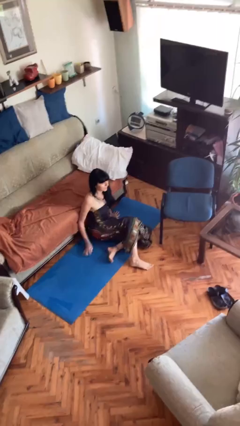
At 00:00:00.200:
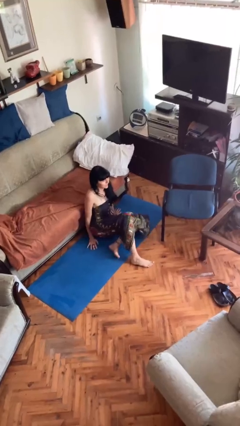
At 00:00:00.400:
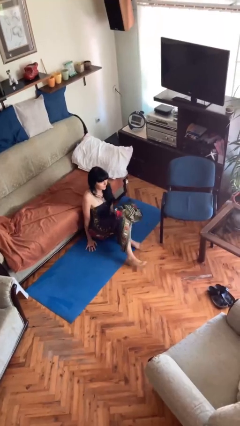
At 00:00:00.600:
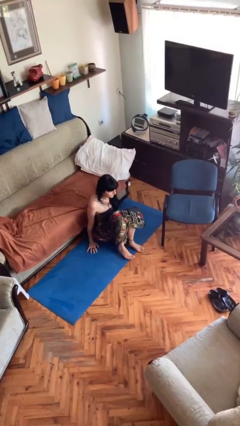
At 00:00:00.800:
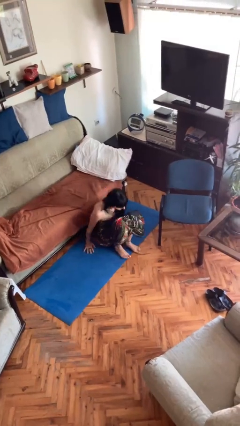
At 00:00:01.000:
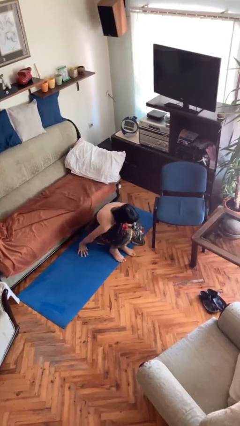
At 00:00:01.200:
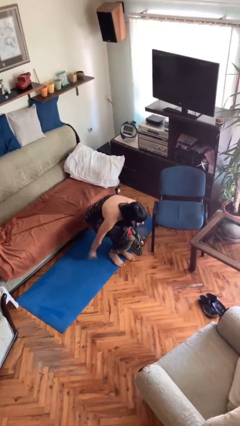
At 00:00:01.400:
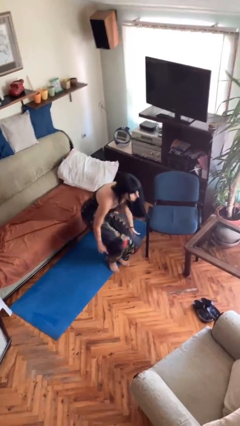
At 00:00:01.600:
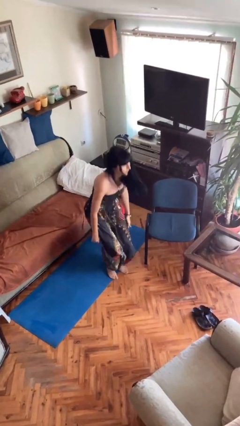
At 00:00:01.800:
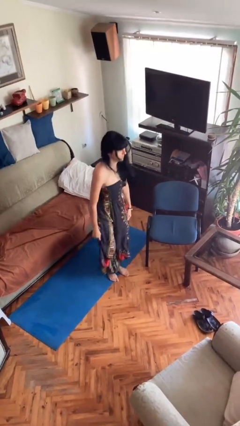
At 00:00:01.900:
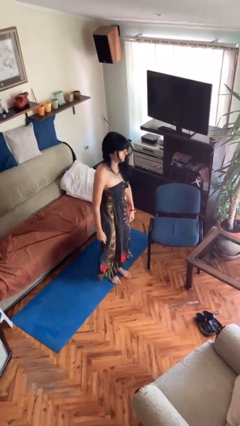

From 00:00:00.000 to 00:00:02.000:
person stands up from floor

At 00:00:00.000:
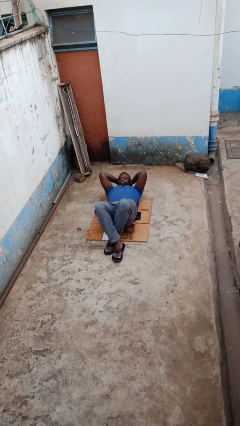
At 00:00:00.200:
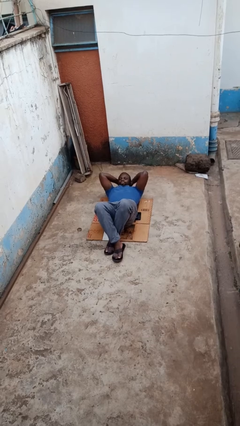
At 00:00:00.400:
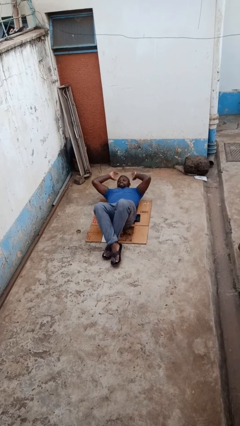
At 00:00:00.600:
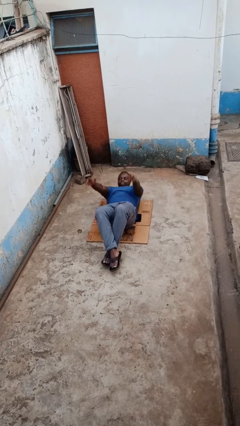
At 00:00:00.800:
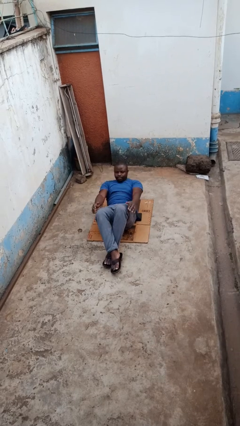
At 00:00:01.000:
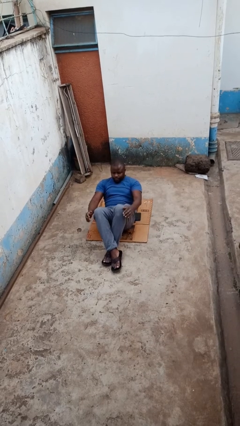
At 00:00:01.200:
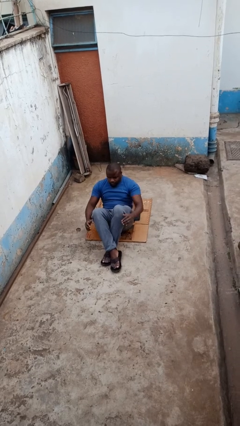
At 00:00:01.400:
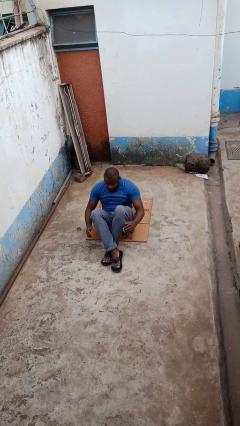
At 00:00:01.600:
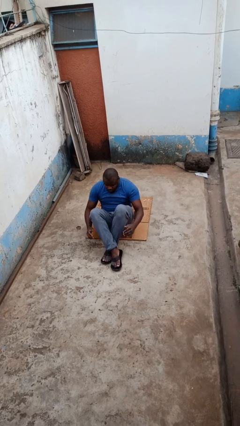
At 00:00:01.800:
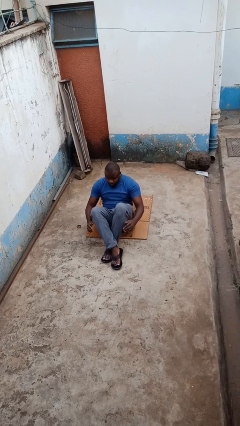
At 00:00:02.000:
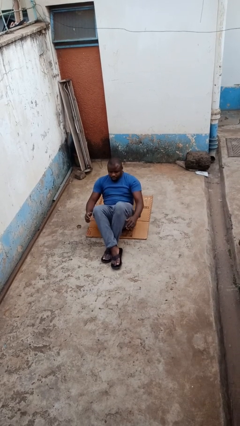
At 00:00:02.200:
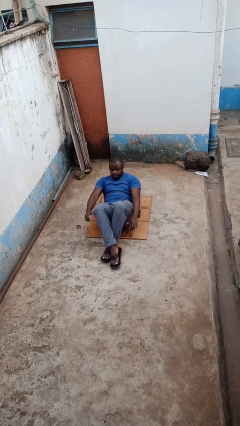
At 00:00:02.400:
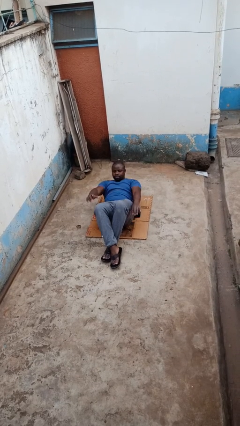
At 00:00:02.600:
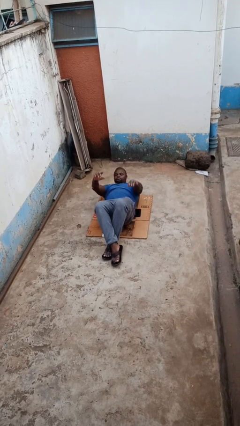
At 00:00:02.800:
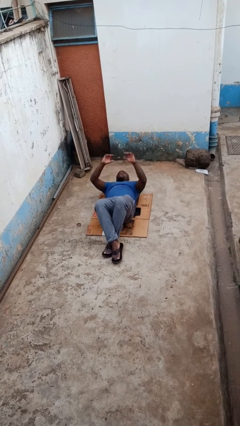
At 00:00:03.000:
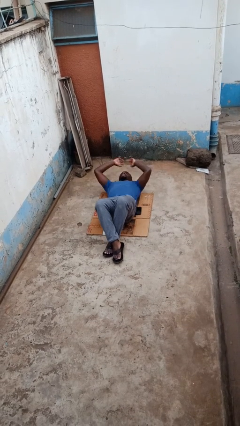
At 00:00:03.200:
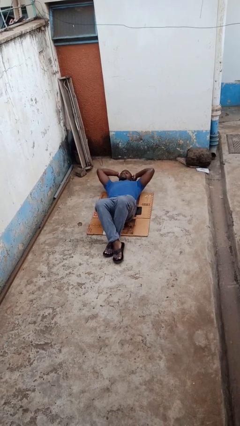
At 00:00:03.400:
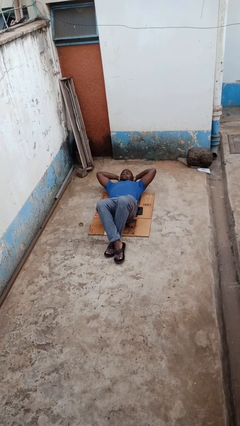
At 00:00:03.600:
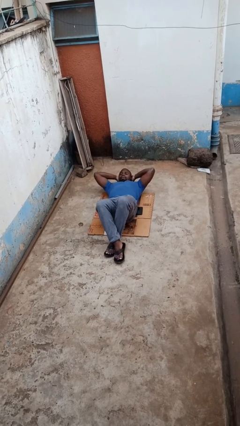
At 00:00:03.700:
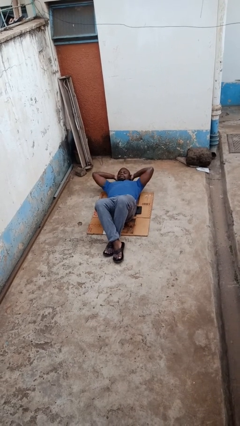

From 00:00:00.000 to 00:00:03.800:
person exercises with situp

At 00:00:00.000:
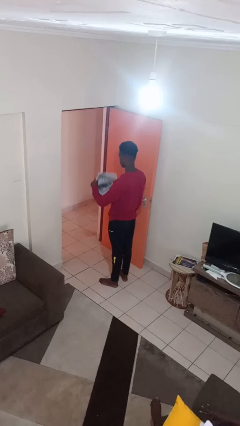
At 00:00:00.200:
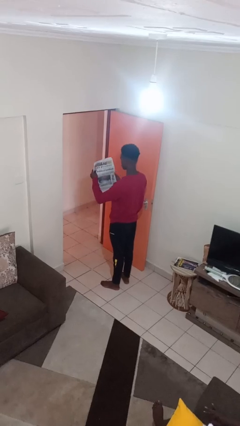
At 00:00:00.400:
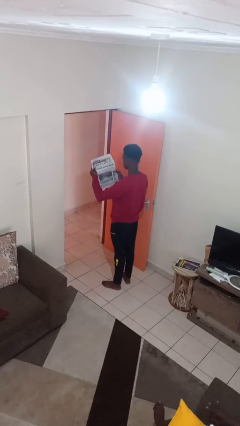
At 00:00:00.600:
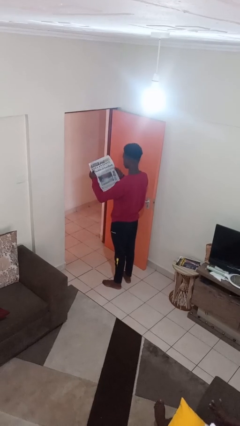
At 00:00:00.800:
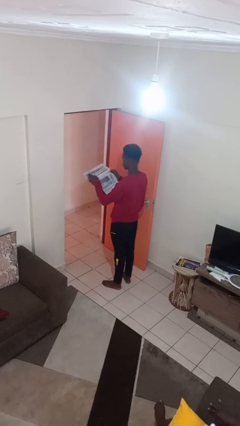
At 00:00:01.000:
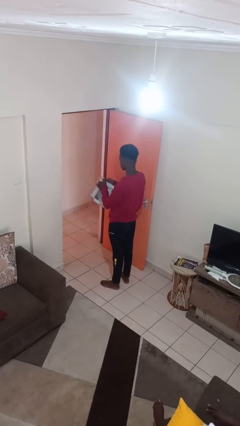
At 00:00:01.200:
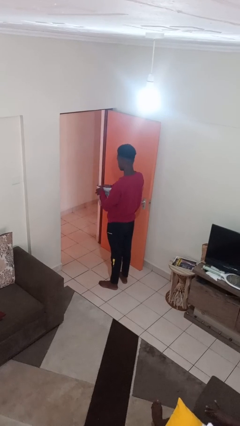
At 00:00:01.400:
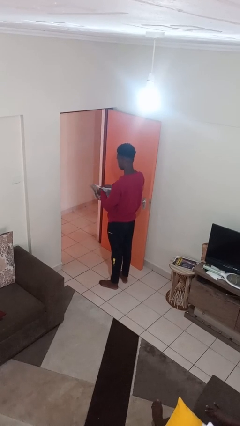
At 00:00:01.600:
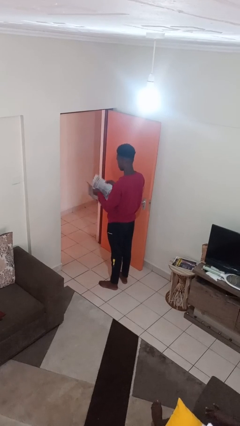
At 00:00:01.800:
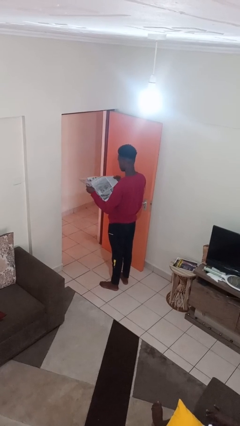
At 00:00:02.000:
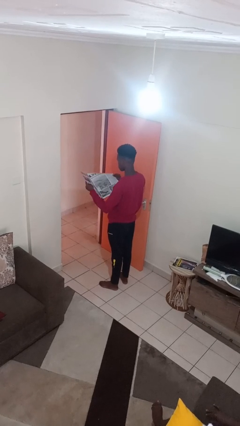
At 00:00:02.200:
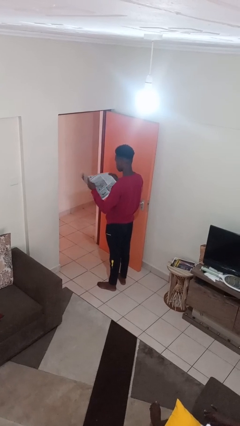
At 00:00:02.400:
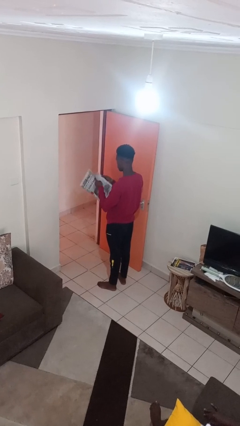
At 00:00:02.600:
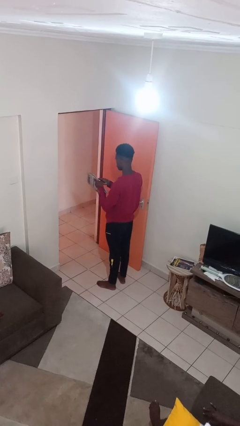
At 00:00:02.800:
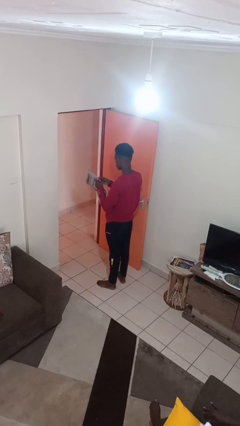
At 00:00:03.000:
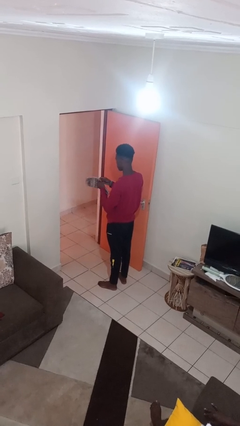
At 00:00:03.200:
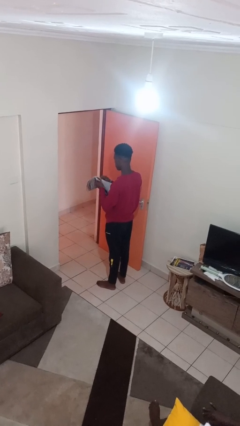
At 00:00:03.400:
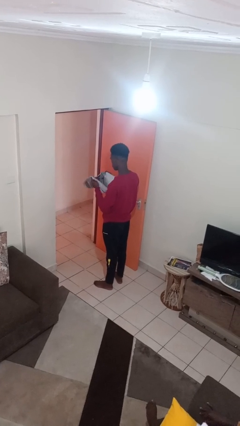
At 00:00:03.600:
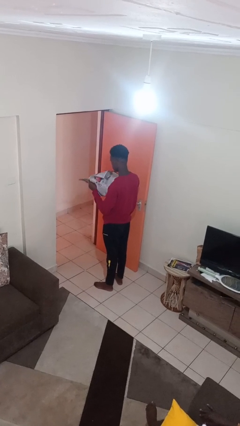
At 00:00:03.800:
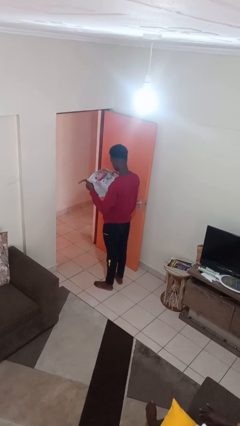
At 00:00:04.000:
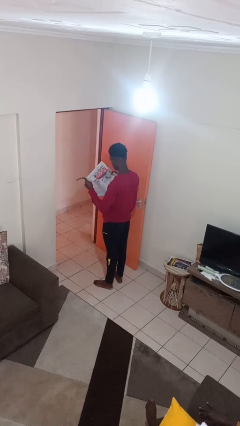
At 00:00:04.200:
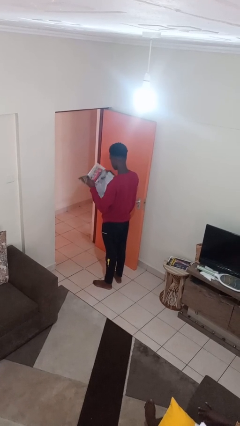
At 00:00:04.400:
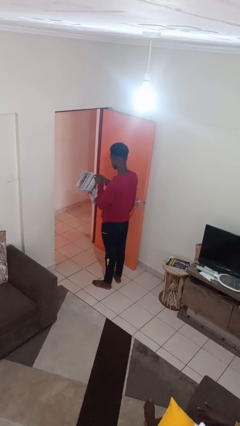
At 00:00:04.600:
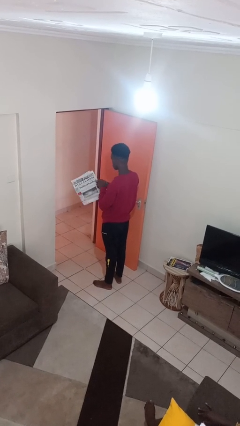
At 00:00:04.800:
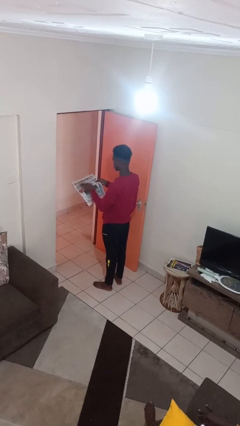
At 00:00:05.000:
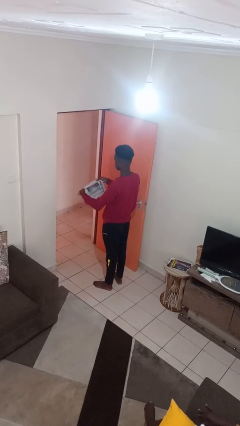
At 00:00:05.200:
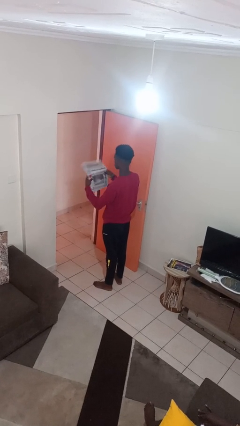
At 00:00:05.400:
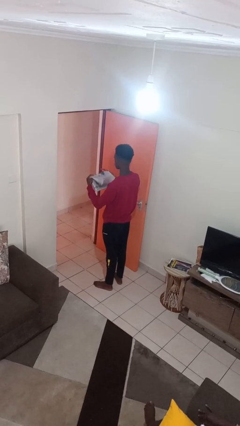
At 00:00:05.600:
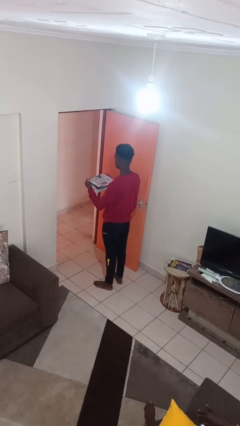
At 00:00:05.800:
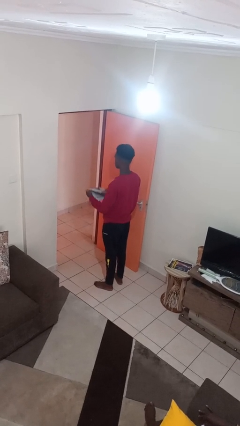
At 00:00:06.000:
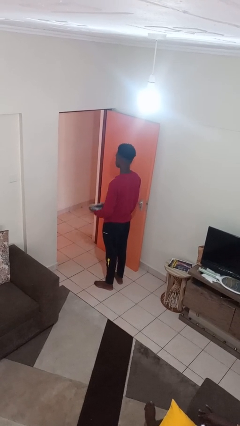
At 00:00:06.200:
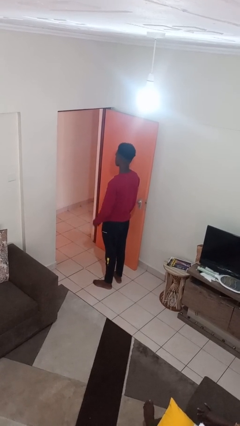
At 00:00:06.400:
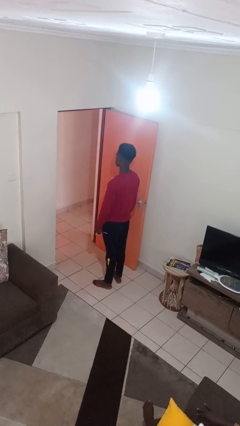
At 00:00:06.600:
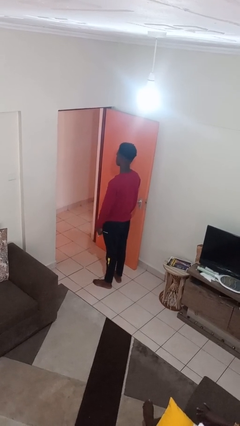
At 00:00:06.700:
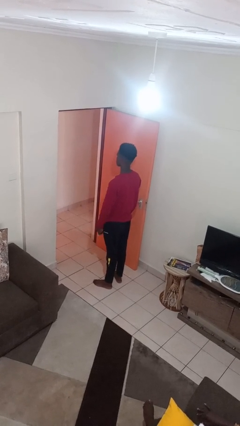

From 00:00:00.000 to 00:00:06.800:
person reads newspaper

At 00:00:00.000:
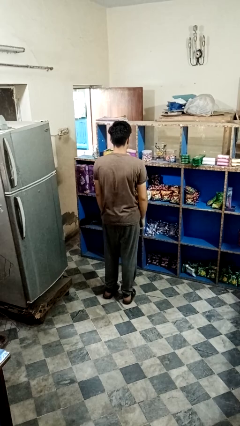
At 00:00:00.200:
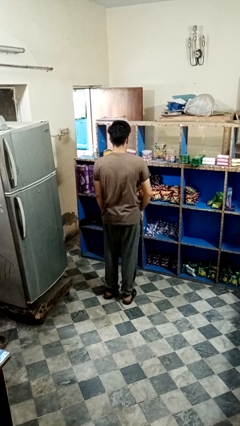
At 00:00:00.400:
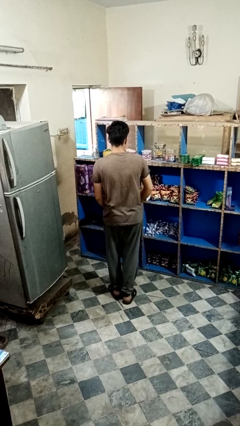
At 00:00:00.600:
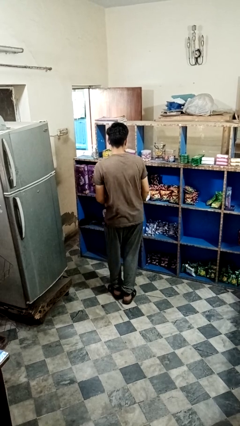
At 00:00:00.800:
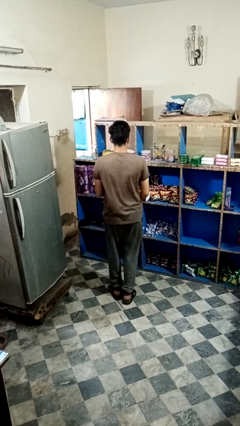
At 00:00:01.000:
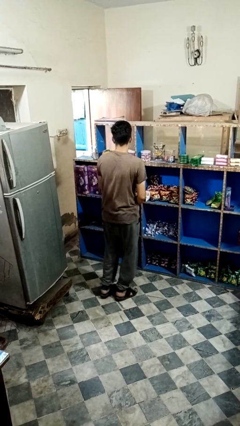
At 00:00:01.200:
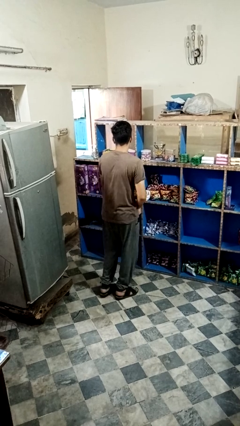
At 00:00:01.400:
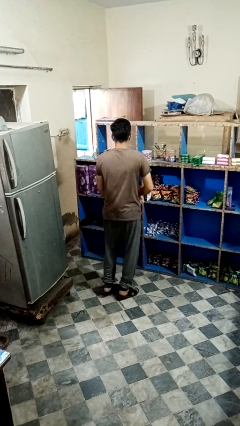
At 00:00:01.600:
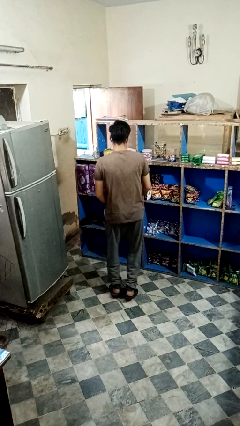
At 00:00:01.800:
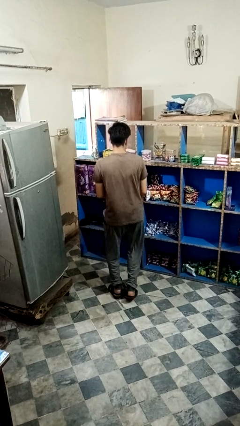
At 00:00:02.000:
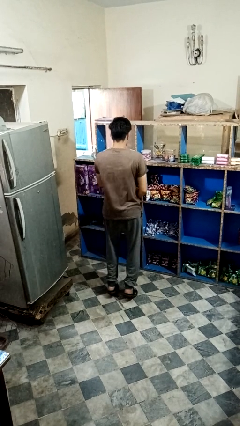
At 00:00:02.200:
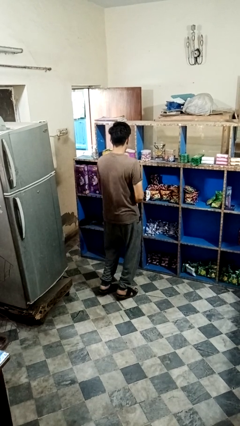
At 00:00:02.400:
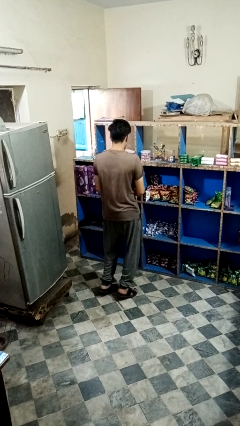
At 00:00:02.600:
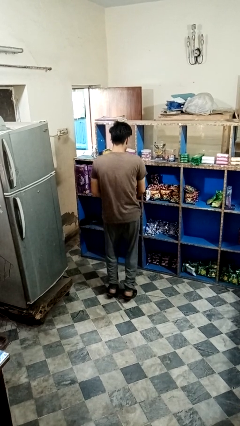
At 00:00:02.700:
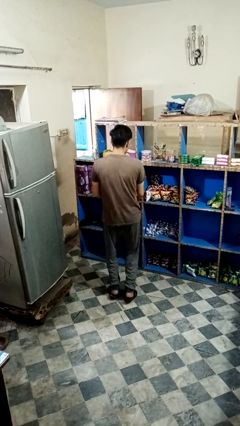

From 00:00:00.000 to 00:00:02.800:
person dances in place

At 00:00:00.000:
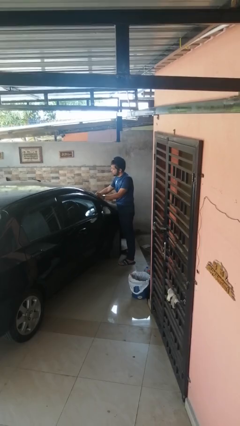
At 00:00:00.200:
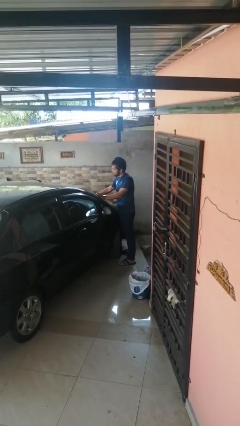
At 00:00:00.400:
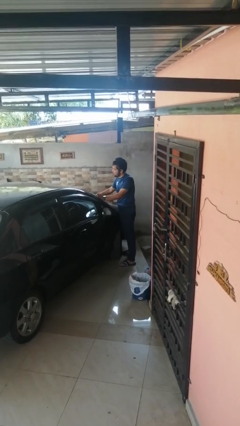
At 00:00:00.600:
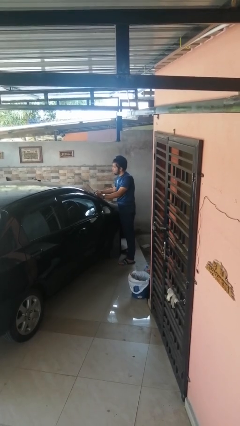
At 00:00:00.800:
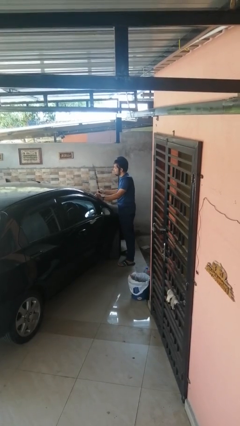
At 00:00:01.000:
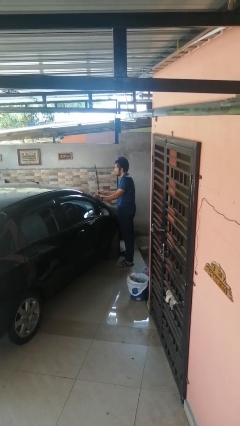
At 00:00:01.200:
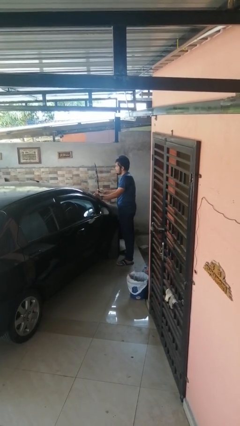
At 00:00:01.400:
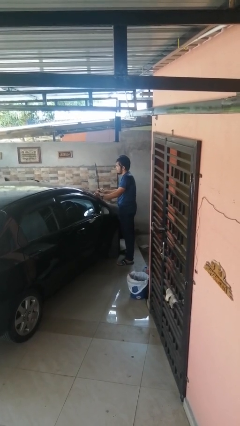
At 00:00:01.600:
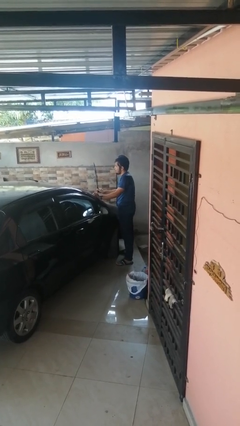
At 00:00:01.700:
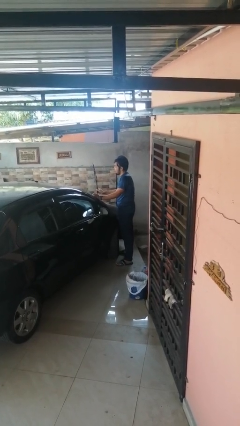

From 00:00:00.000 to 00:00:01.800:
person flips up car wipers
